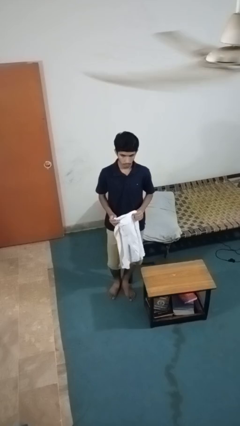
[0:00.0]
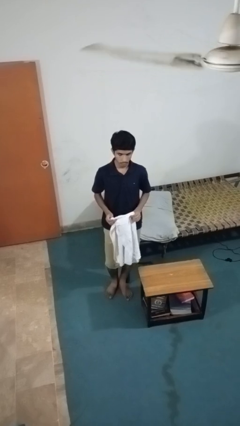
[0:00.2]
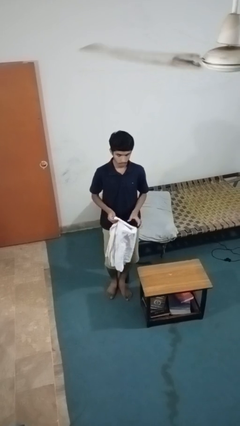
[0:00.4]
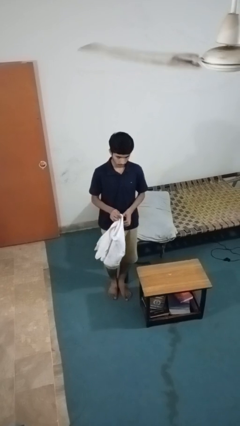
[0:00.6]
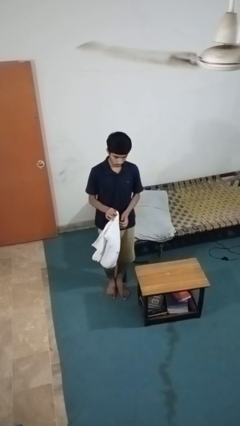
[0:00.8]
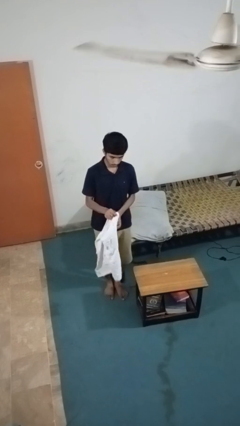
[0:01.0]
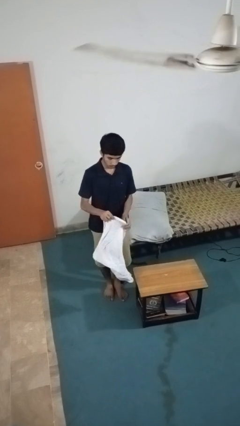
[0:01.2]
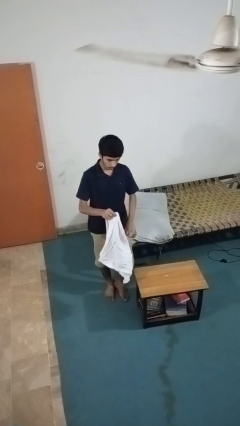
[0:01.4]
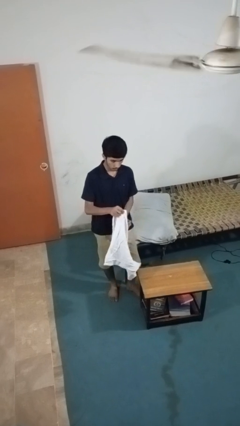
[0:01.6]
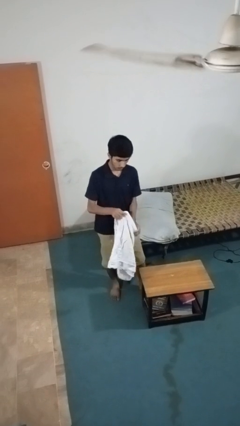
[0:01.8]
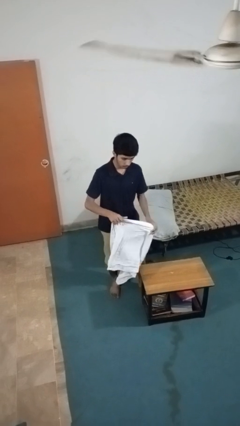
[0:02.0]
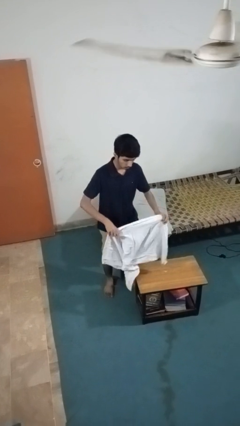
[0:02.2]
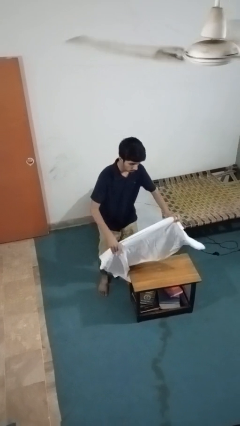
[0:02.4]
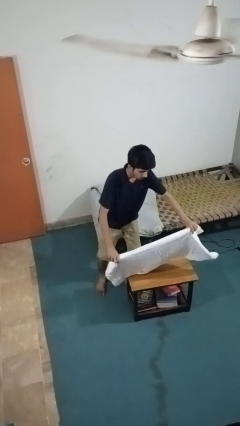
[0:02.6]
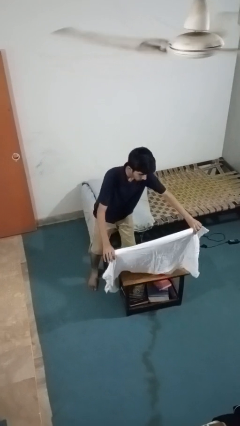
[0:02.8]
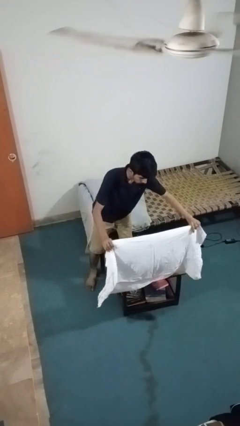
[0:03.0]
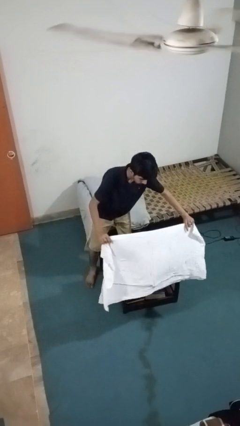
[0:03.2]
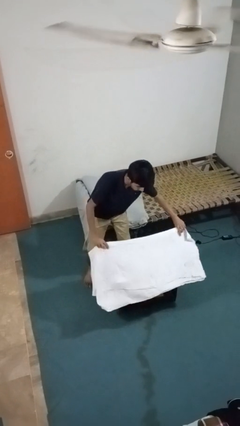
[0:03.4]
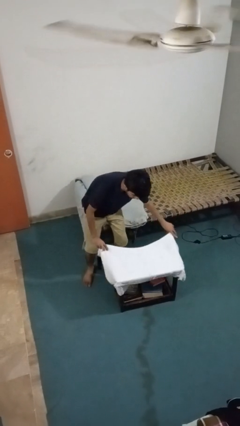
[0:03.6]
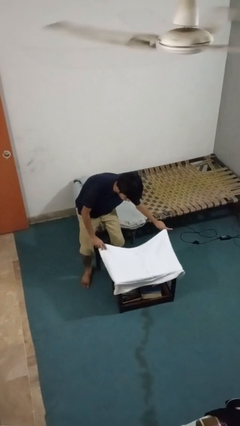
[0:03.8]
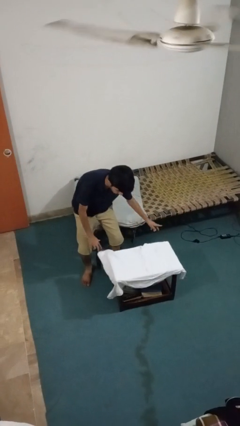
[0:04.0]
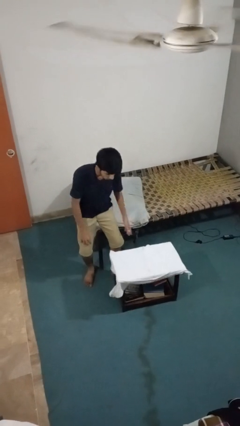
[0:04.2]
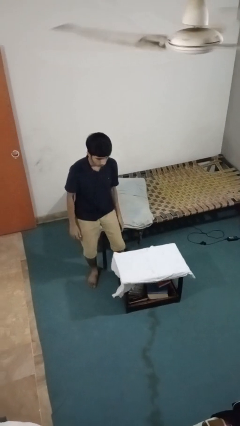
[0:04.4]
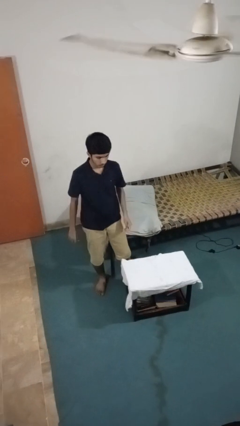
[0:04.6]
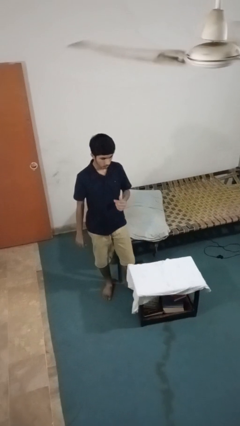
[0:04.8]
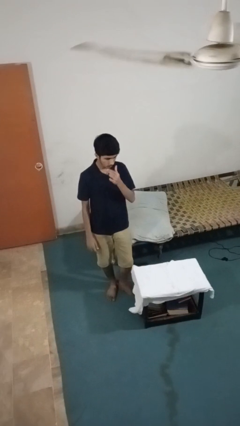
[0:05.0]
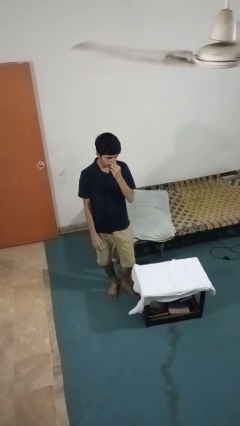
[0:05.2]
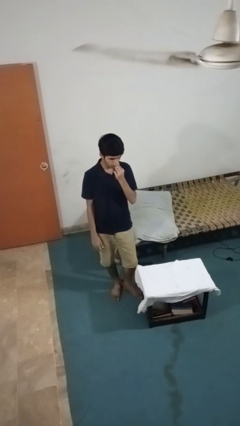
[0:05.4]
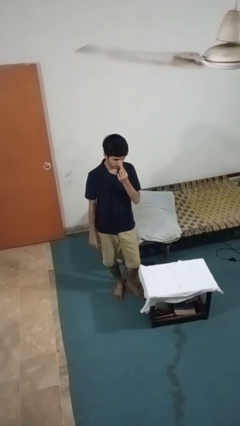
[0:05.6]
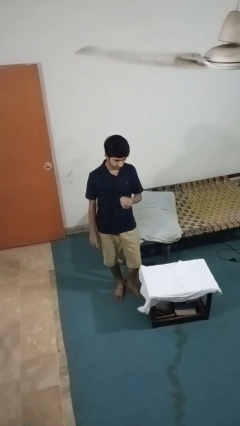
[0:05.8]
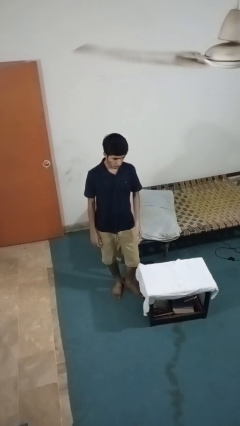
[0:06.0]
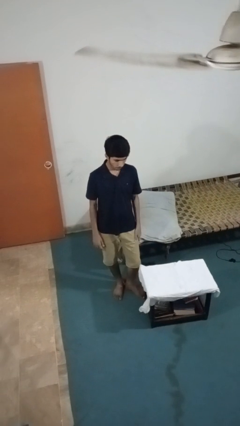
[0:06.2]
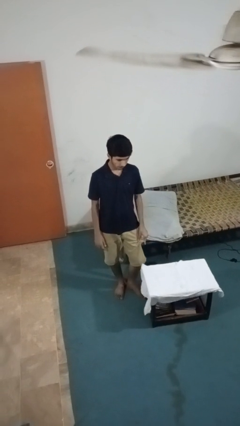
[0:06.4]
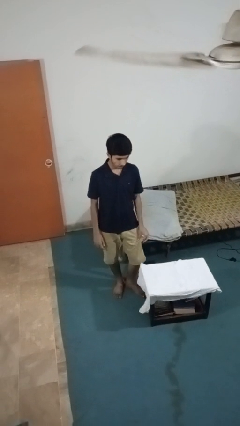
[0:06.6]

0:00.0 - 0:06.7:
person spreads tablecloth

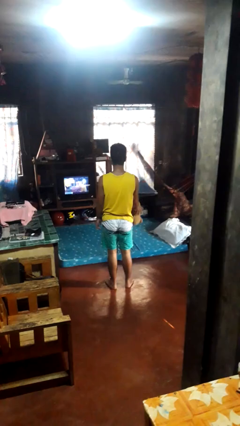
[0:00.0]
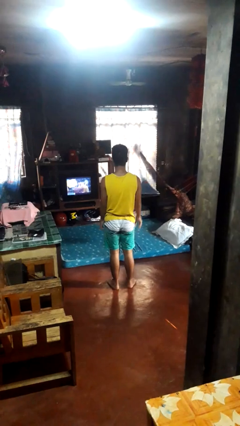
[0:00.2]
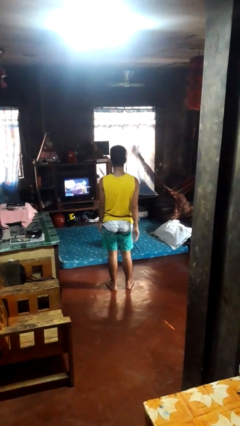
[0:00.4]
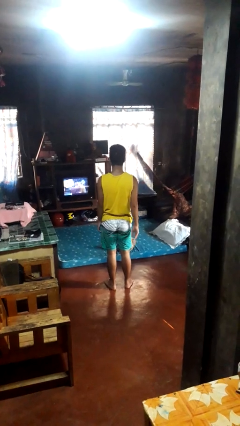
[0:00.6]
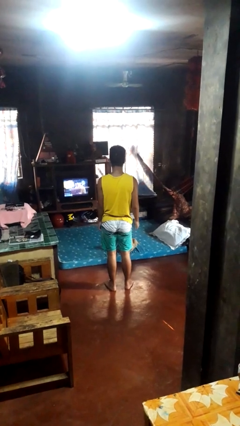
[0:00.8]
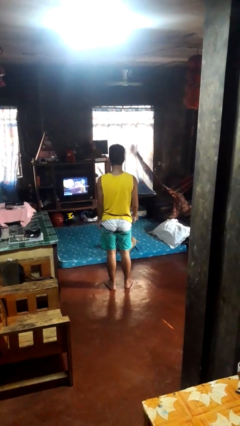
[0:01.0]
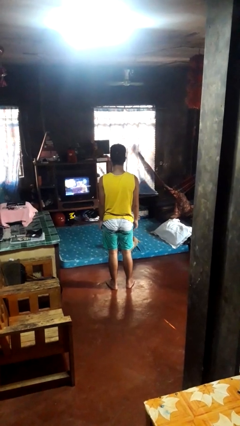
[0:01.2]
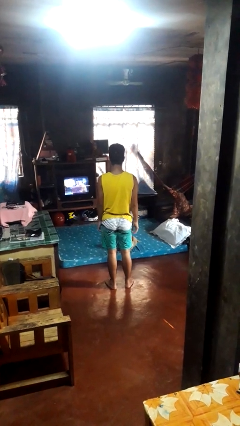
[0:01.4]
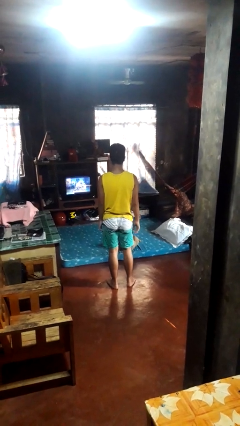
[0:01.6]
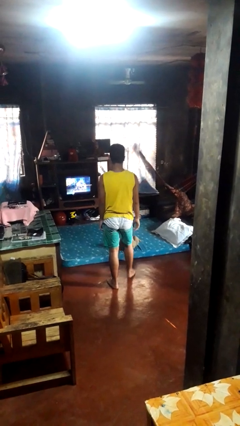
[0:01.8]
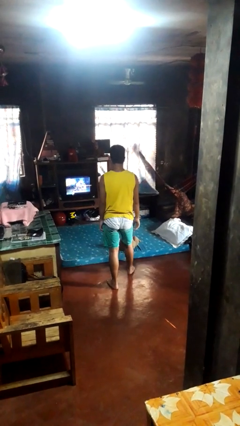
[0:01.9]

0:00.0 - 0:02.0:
person throws object on bed

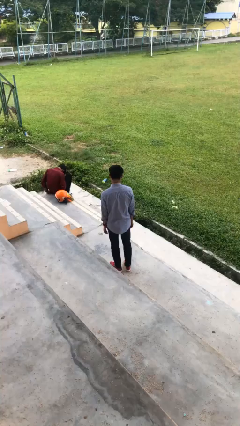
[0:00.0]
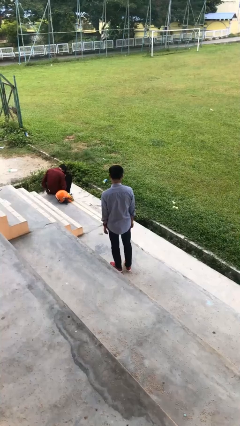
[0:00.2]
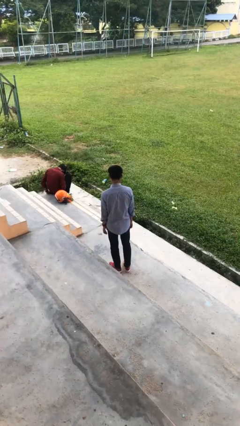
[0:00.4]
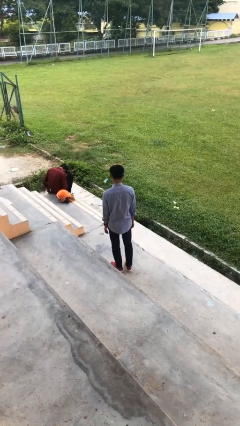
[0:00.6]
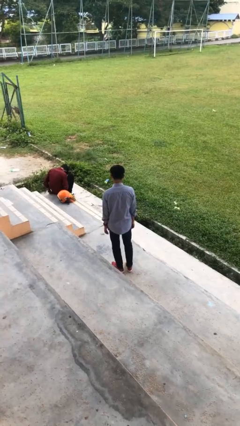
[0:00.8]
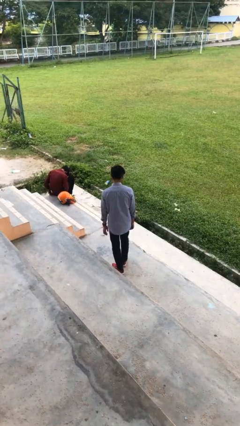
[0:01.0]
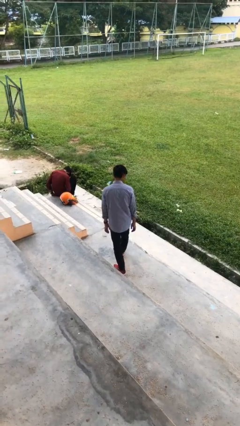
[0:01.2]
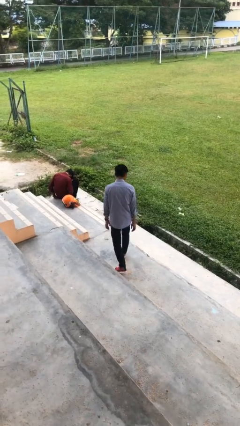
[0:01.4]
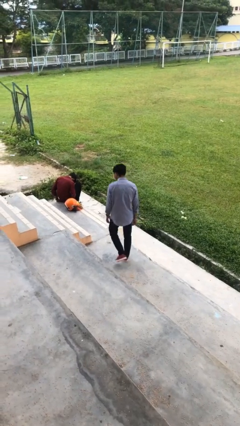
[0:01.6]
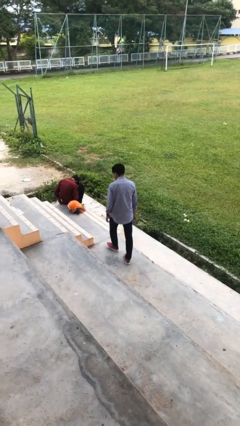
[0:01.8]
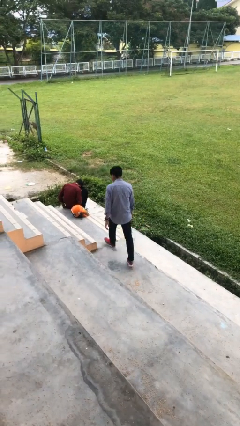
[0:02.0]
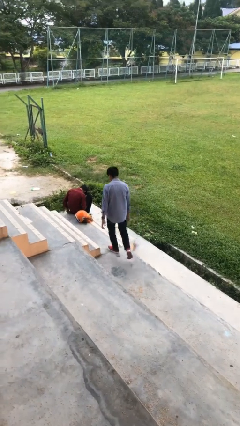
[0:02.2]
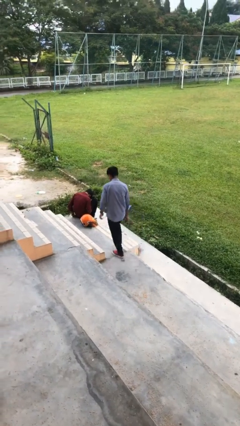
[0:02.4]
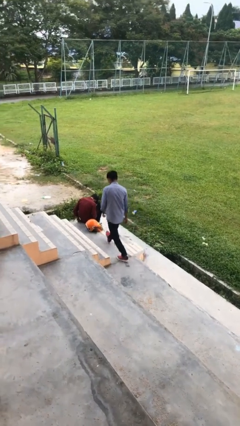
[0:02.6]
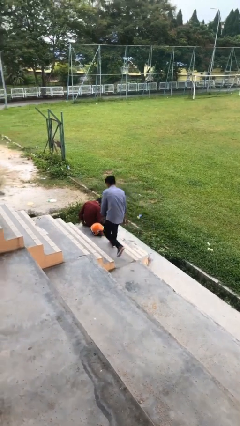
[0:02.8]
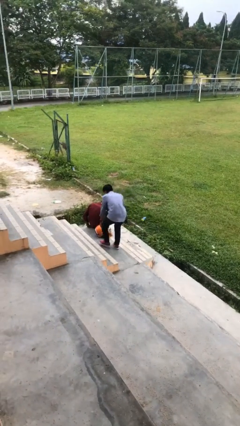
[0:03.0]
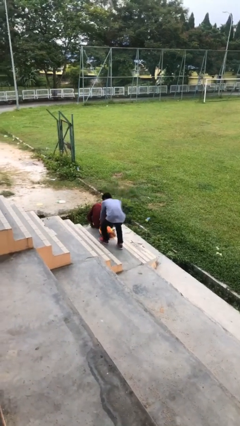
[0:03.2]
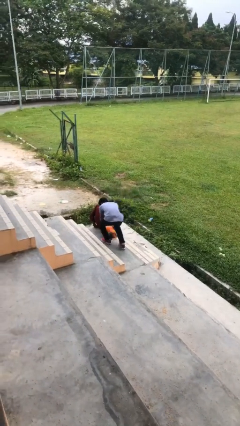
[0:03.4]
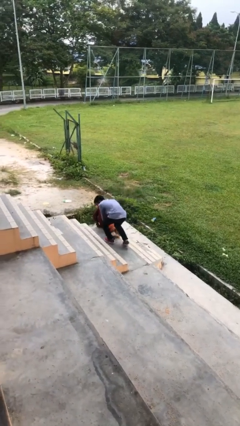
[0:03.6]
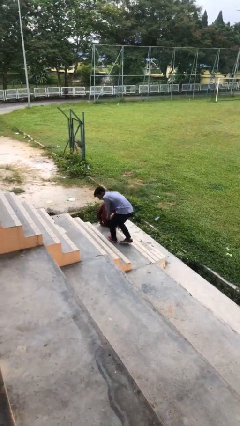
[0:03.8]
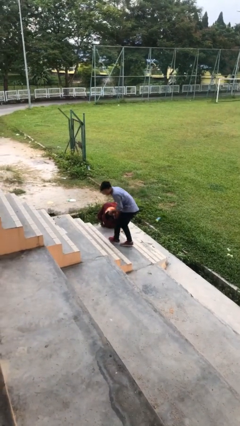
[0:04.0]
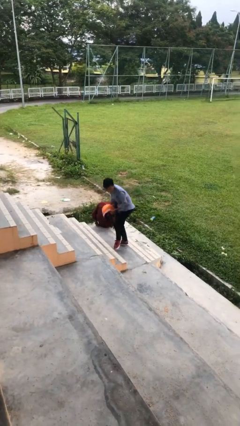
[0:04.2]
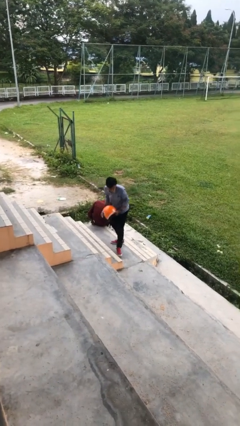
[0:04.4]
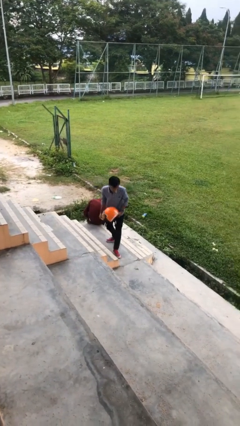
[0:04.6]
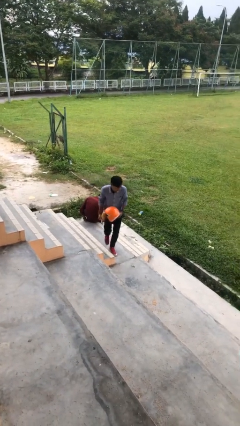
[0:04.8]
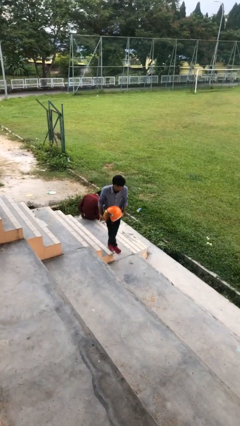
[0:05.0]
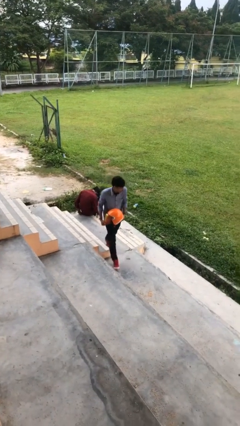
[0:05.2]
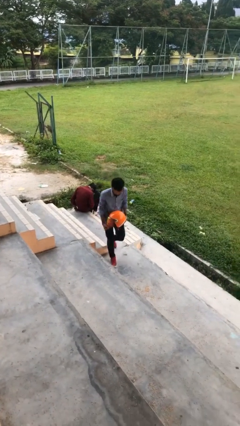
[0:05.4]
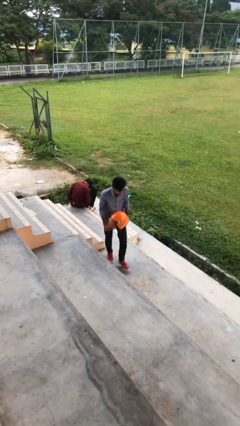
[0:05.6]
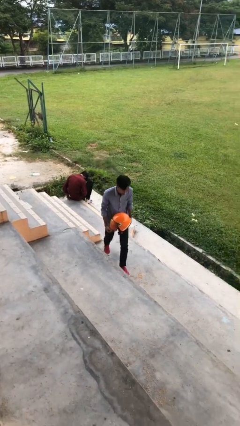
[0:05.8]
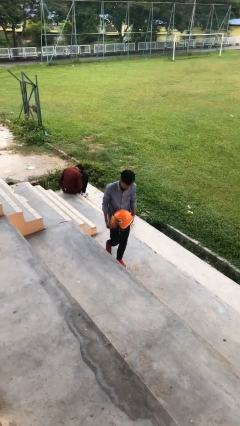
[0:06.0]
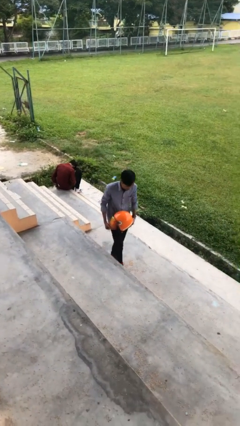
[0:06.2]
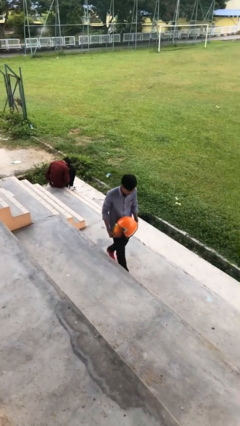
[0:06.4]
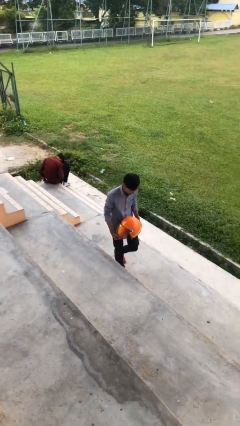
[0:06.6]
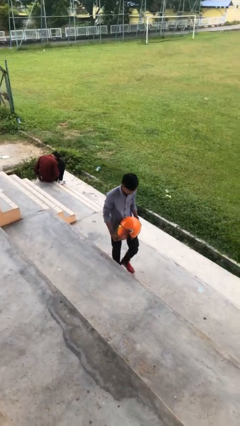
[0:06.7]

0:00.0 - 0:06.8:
person steals object from person

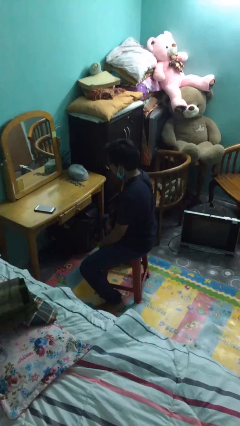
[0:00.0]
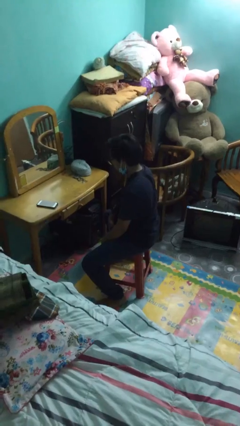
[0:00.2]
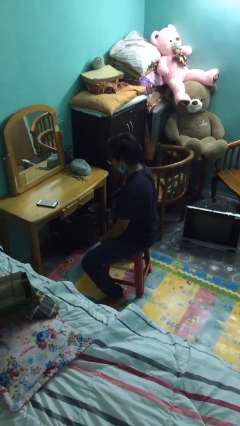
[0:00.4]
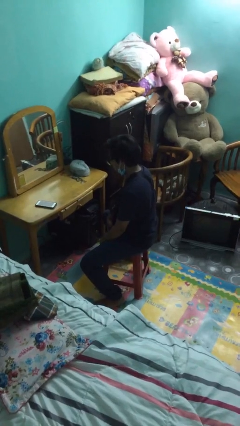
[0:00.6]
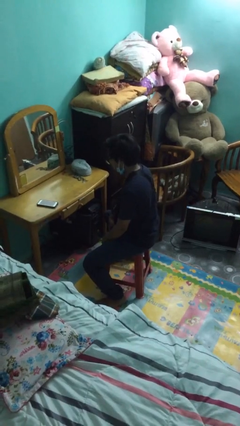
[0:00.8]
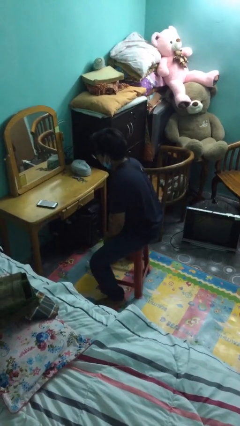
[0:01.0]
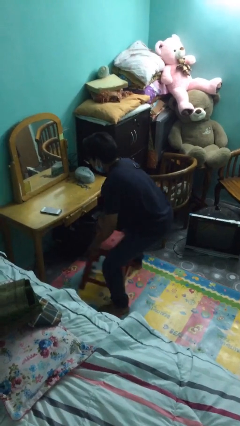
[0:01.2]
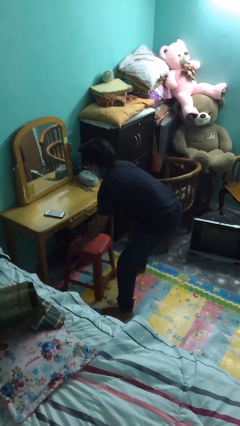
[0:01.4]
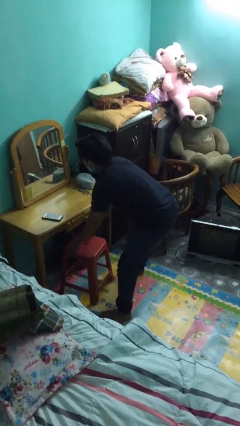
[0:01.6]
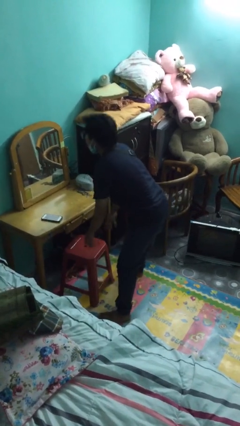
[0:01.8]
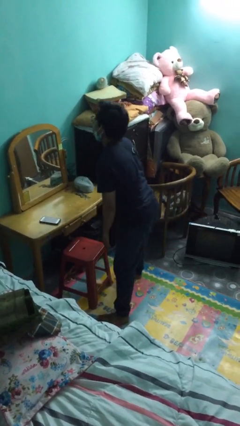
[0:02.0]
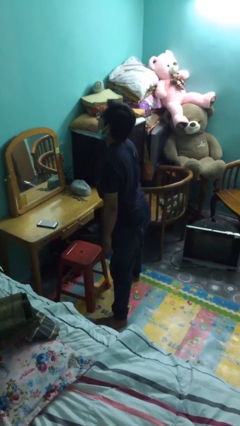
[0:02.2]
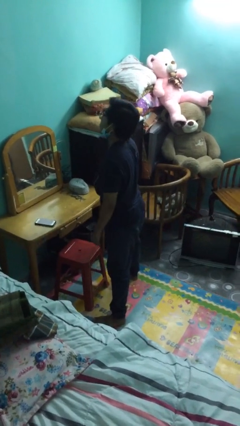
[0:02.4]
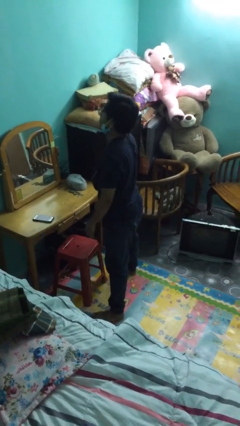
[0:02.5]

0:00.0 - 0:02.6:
person stands up
